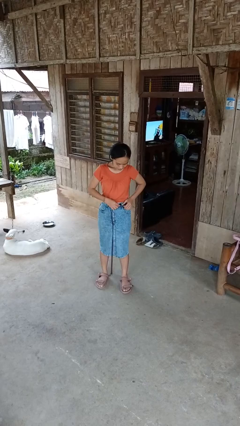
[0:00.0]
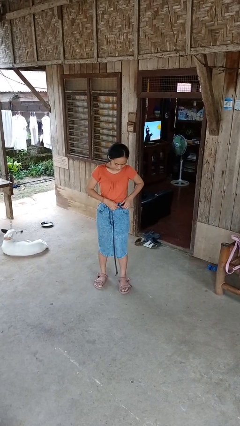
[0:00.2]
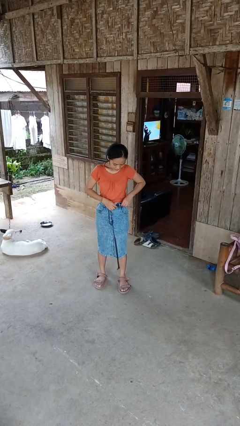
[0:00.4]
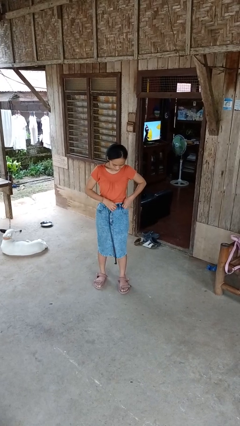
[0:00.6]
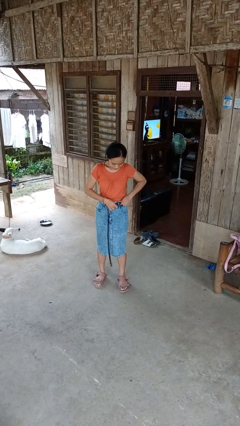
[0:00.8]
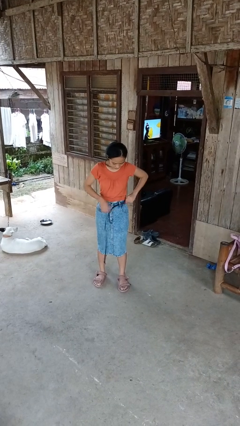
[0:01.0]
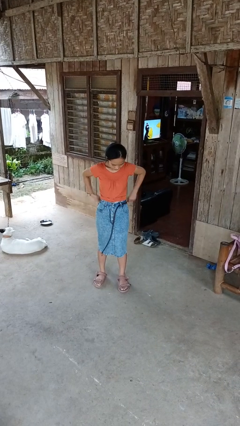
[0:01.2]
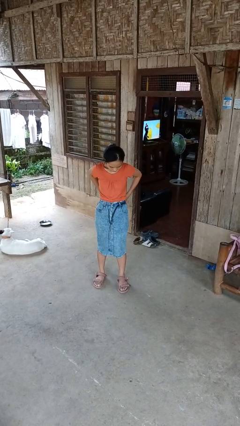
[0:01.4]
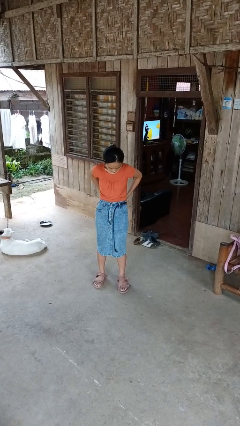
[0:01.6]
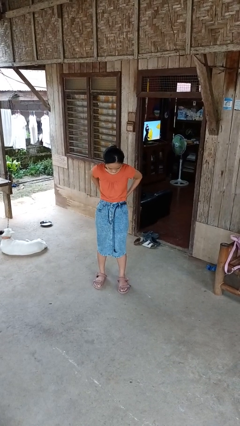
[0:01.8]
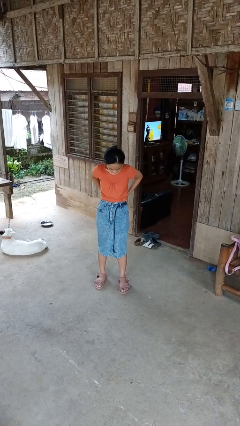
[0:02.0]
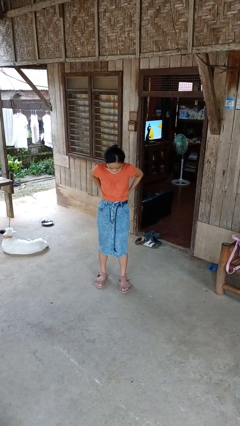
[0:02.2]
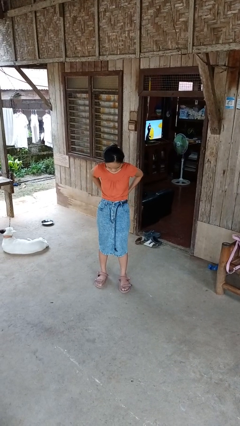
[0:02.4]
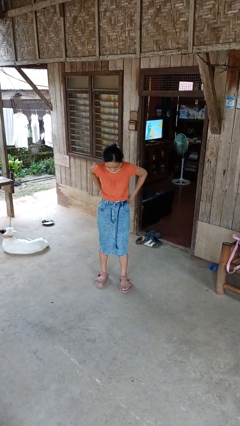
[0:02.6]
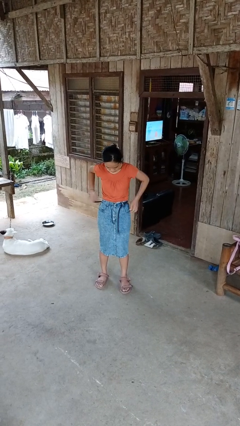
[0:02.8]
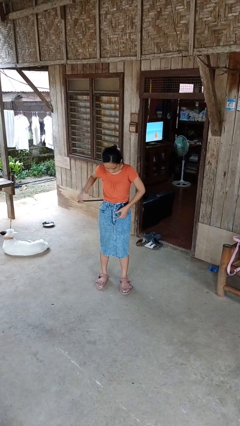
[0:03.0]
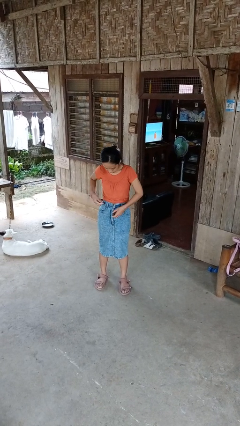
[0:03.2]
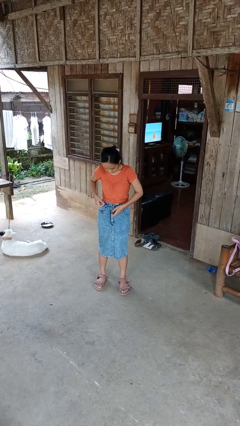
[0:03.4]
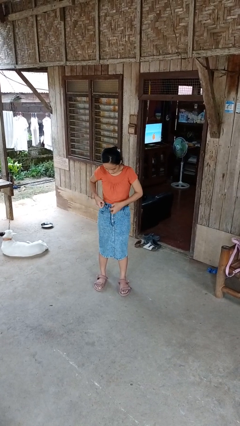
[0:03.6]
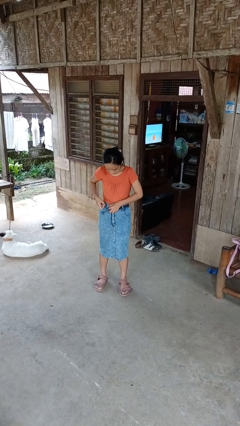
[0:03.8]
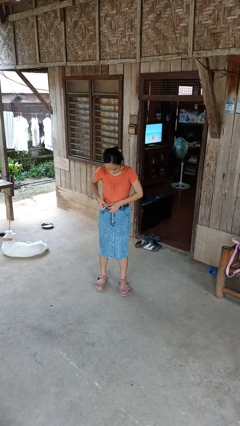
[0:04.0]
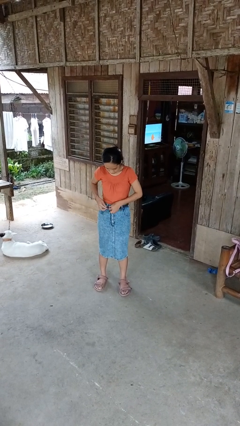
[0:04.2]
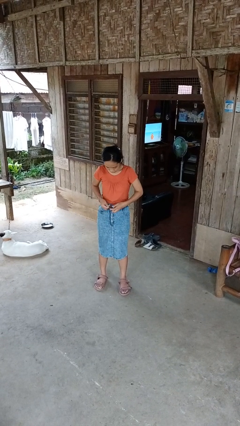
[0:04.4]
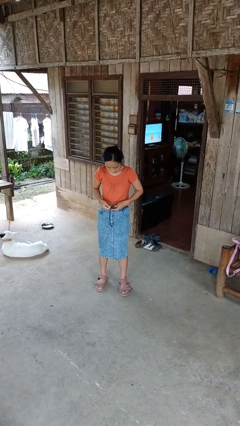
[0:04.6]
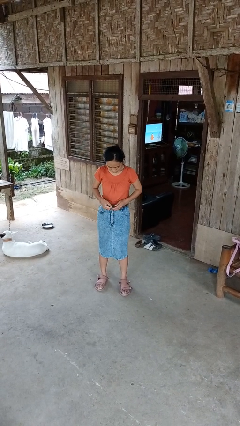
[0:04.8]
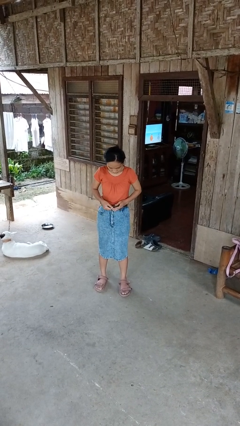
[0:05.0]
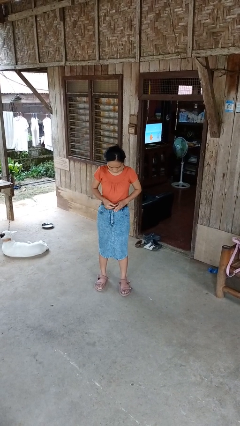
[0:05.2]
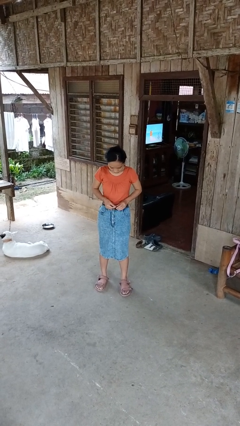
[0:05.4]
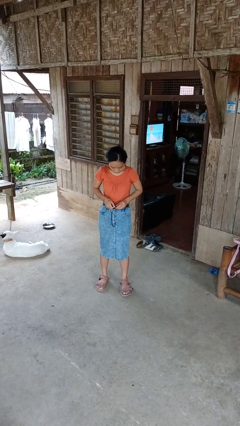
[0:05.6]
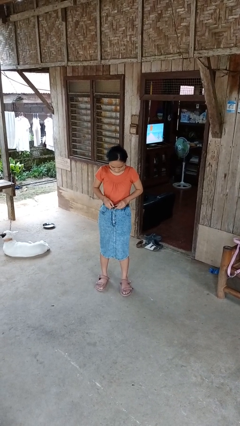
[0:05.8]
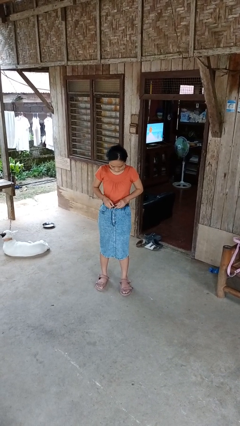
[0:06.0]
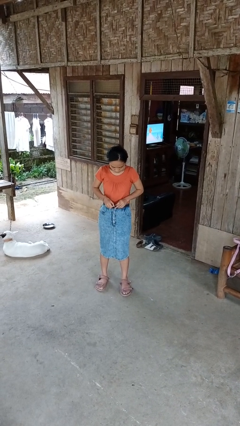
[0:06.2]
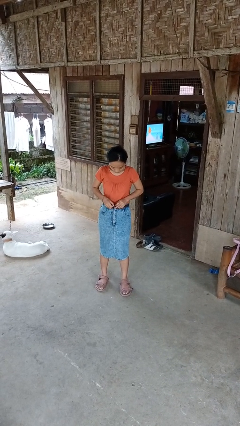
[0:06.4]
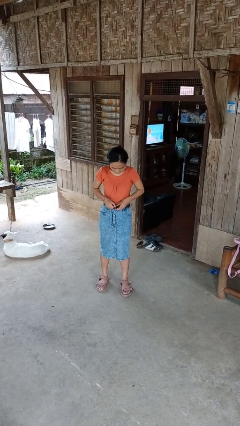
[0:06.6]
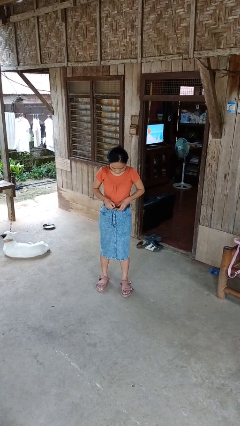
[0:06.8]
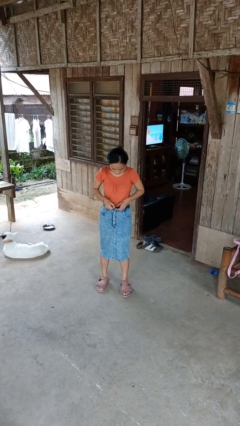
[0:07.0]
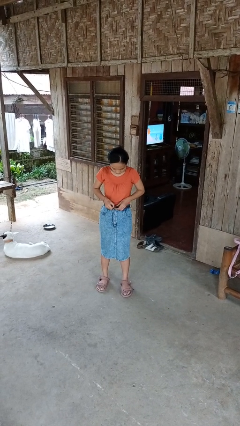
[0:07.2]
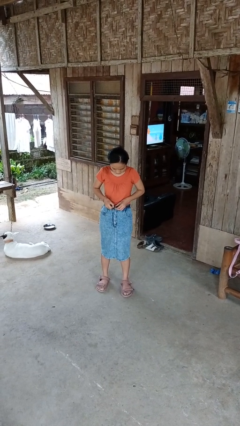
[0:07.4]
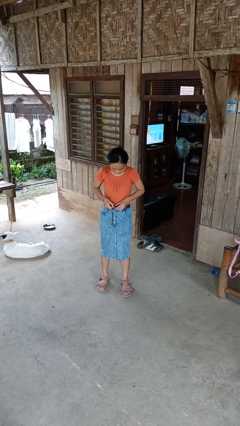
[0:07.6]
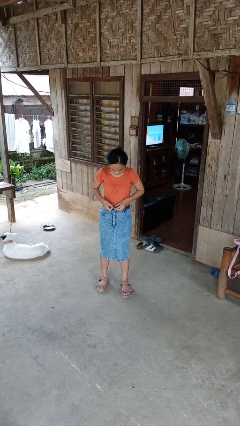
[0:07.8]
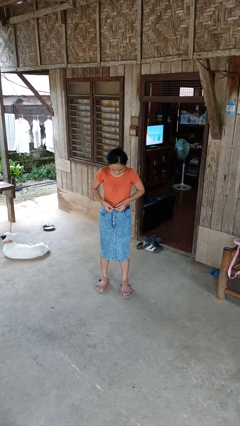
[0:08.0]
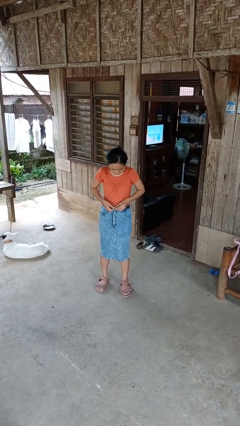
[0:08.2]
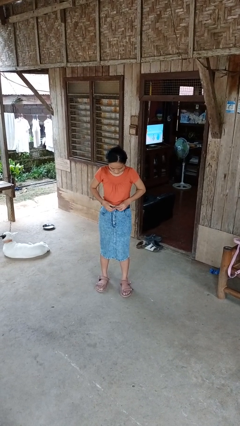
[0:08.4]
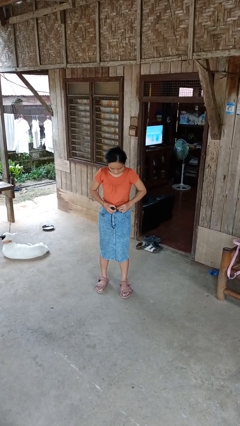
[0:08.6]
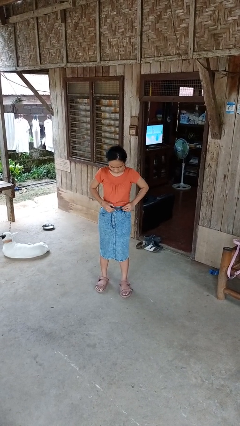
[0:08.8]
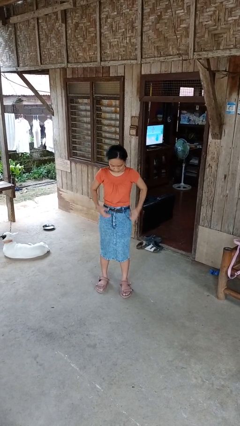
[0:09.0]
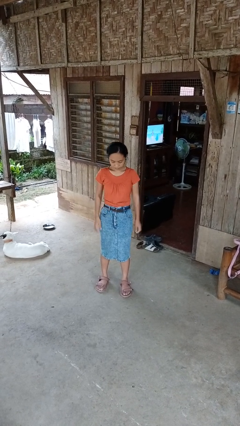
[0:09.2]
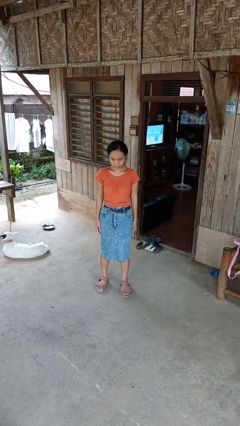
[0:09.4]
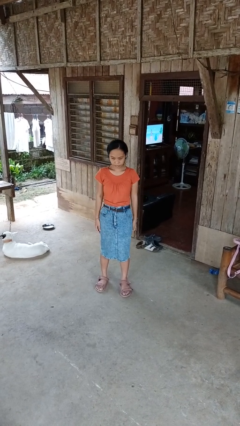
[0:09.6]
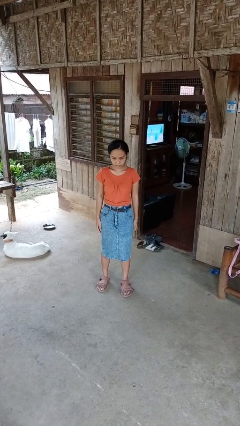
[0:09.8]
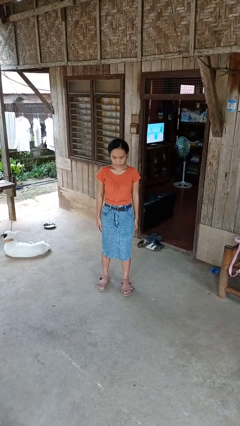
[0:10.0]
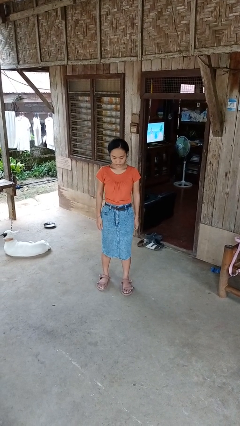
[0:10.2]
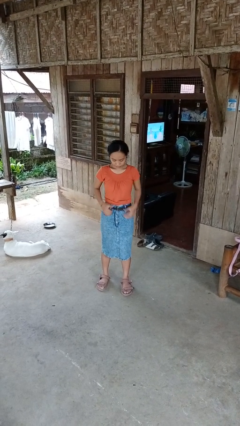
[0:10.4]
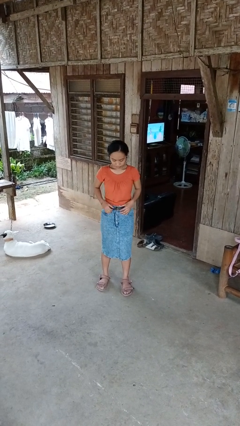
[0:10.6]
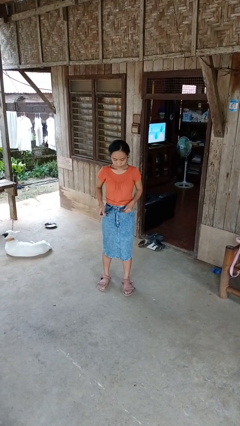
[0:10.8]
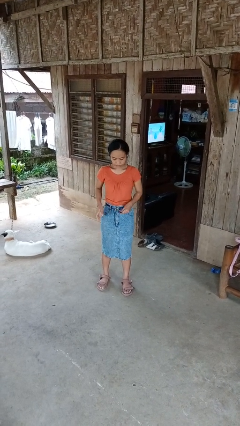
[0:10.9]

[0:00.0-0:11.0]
person puts on belt

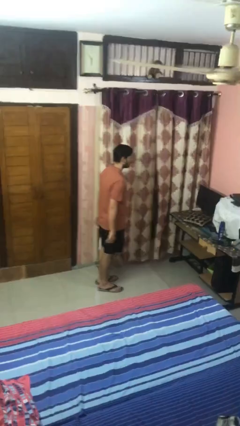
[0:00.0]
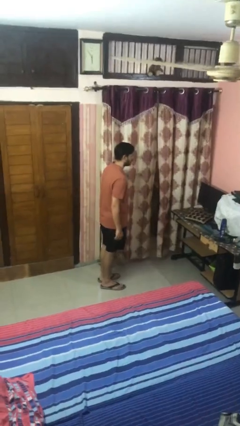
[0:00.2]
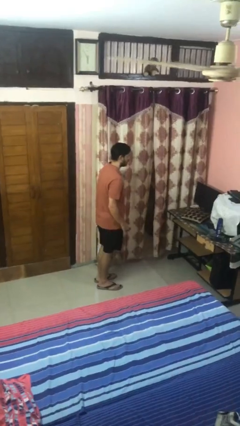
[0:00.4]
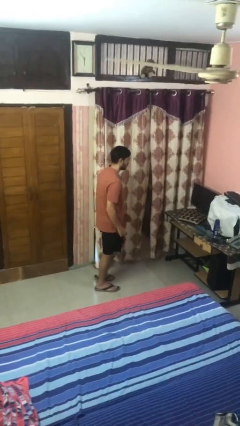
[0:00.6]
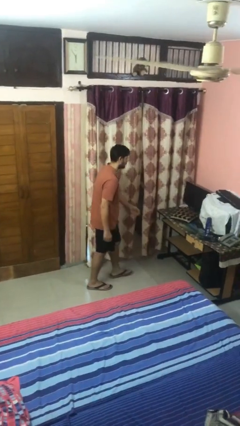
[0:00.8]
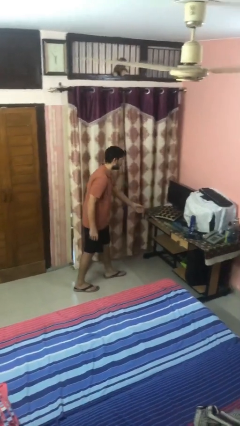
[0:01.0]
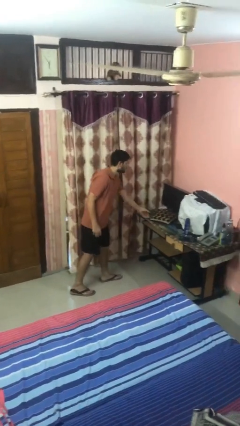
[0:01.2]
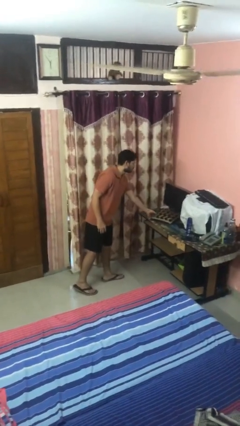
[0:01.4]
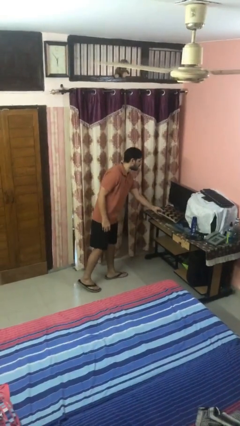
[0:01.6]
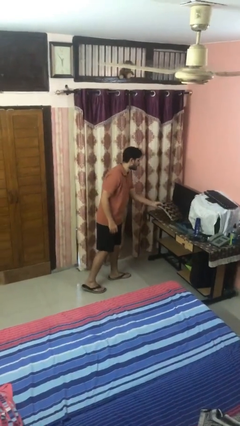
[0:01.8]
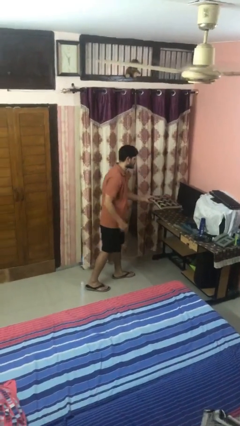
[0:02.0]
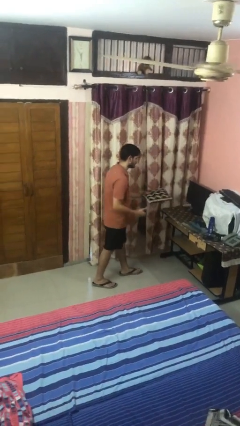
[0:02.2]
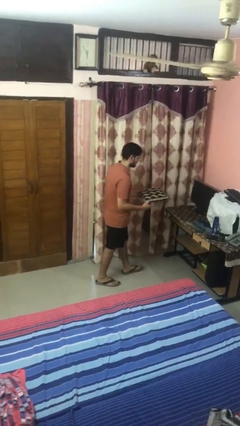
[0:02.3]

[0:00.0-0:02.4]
person picks up object from table

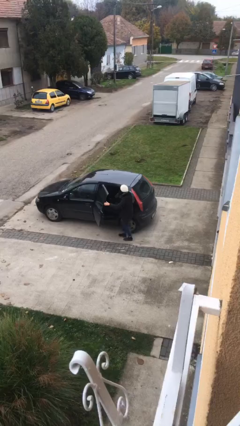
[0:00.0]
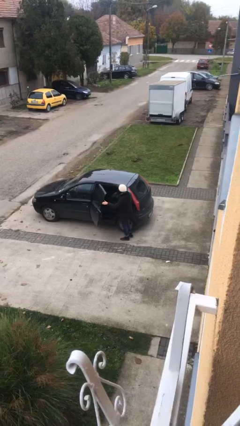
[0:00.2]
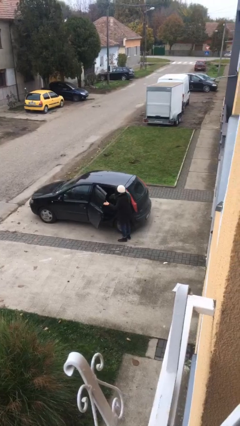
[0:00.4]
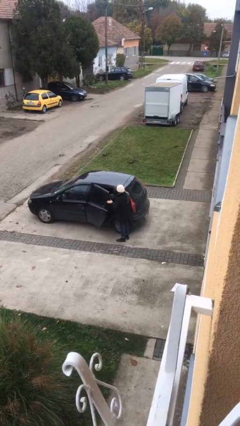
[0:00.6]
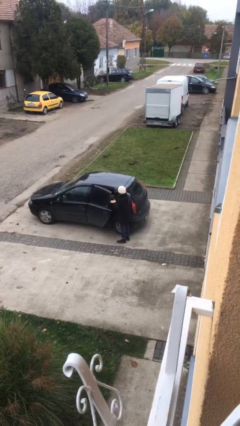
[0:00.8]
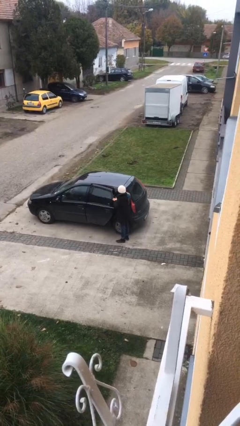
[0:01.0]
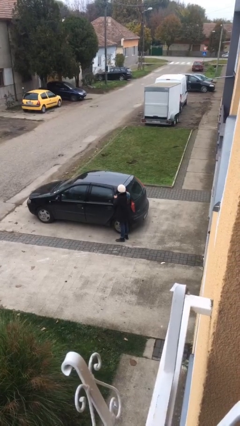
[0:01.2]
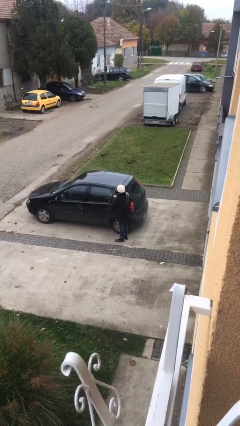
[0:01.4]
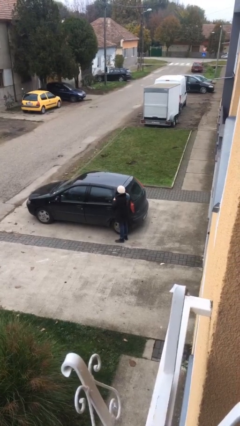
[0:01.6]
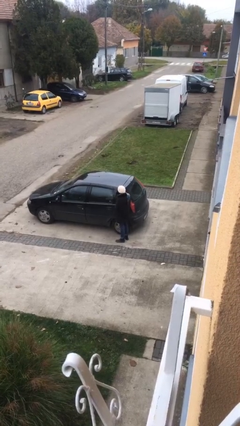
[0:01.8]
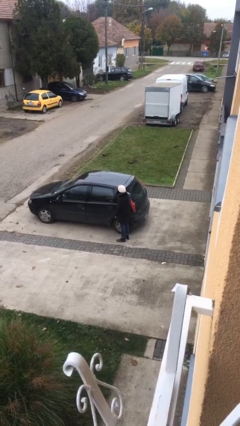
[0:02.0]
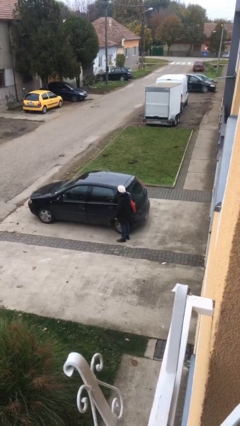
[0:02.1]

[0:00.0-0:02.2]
person closes car door

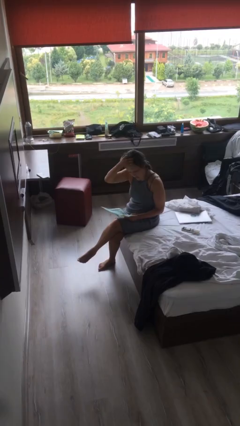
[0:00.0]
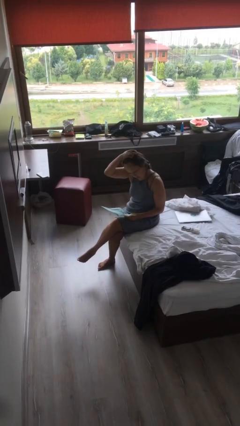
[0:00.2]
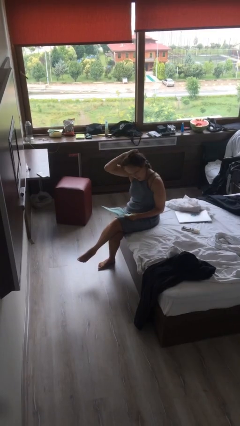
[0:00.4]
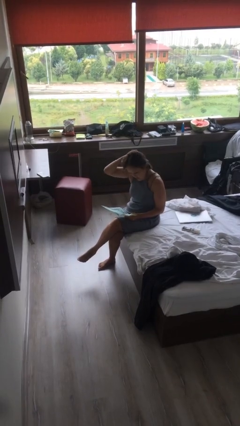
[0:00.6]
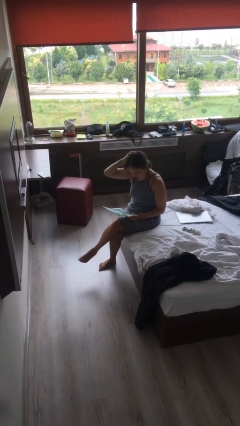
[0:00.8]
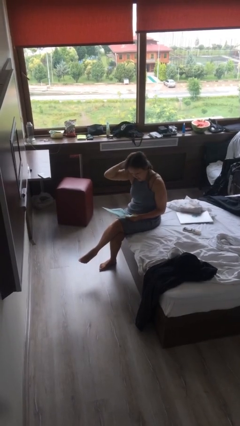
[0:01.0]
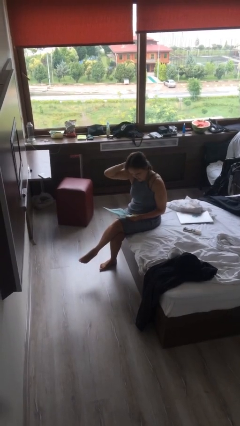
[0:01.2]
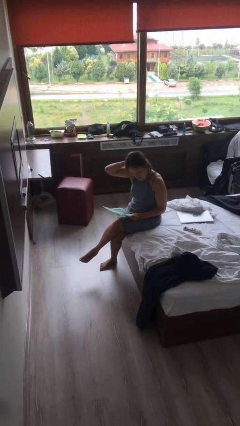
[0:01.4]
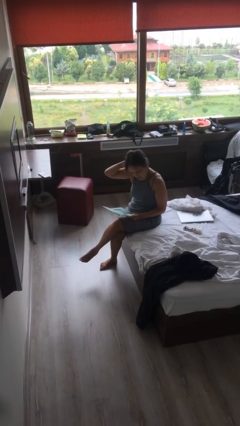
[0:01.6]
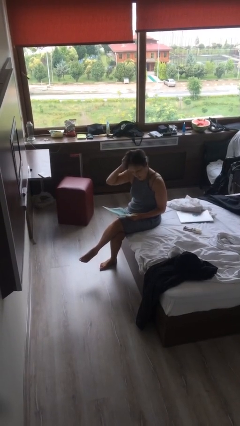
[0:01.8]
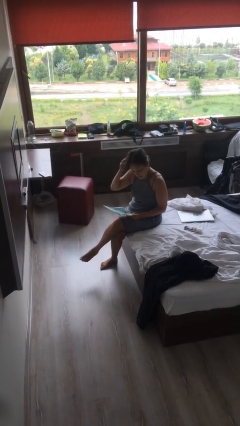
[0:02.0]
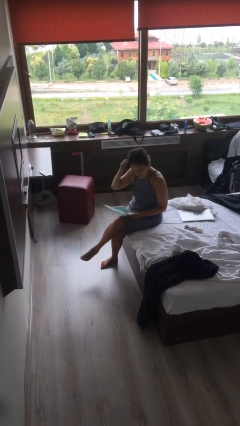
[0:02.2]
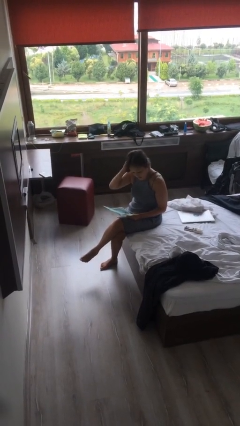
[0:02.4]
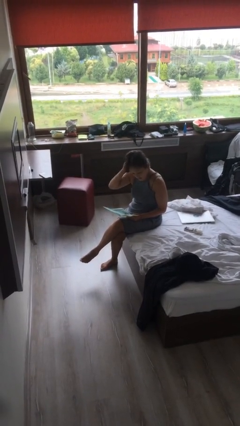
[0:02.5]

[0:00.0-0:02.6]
person reads document
